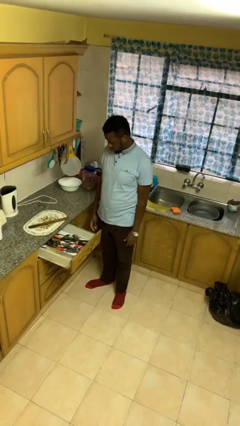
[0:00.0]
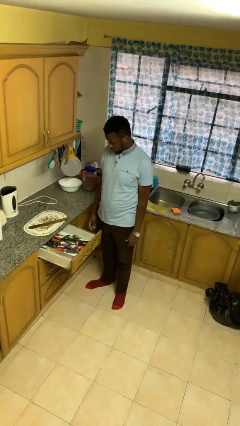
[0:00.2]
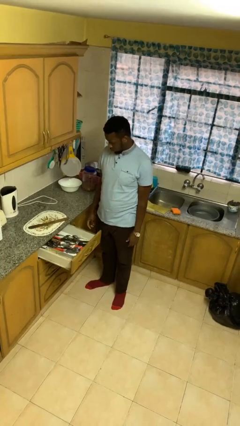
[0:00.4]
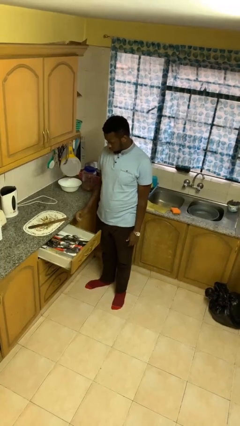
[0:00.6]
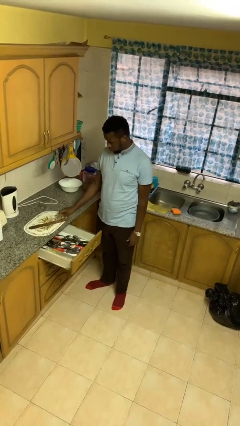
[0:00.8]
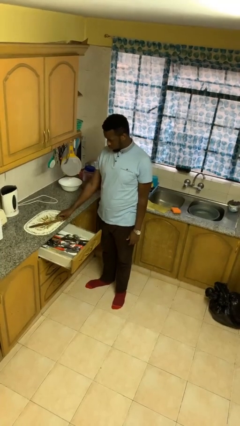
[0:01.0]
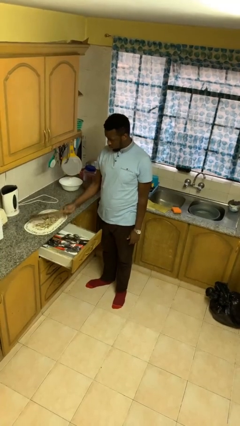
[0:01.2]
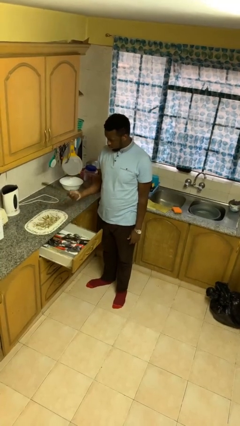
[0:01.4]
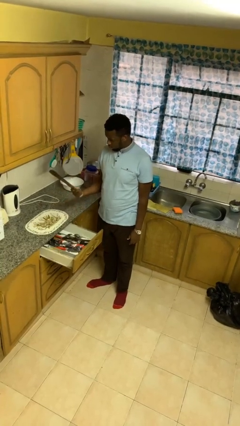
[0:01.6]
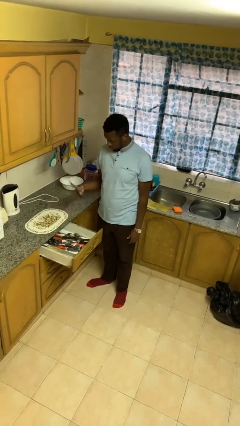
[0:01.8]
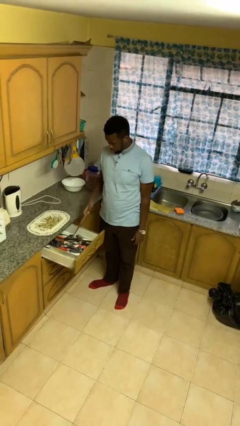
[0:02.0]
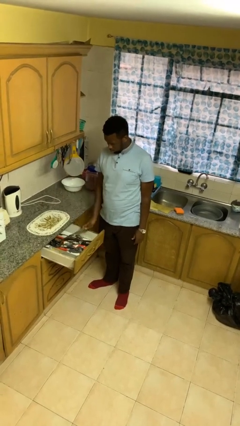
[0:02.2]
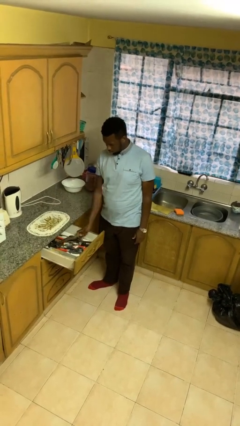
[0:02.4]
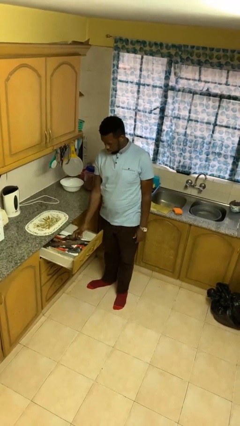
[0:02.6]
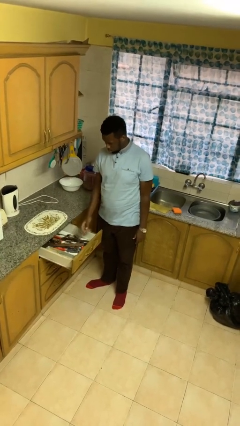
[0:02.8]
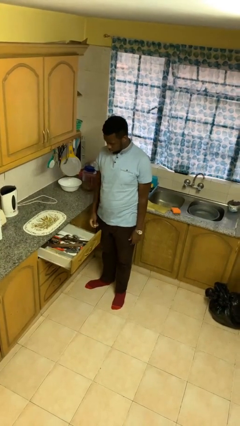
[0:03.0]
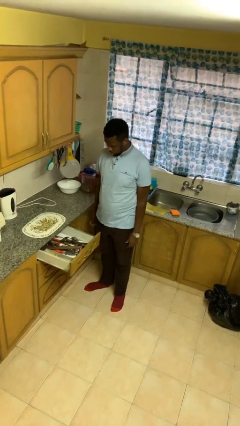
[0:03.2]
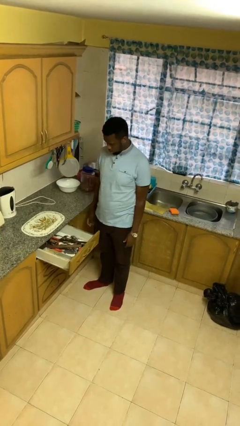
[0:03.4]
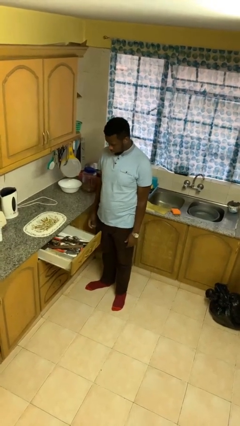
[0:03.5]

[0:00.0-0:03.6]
person puts object into kitchen drawer

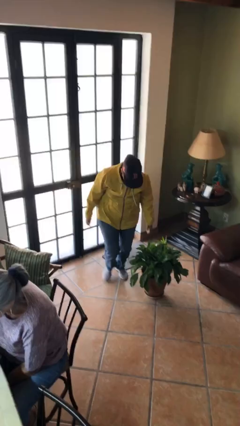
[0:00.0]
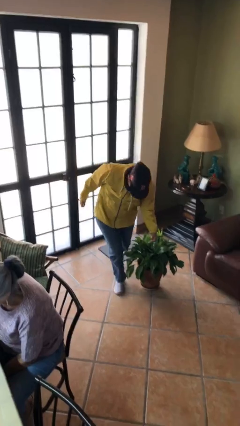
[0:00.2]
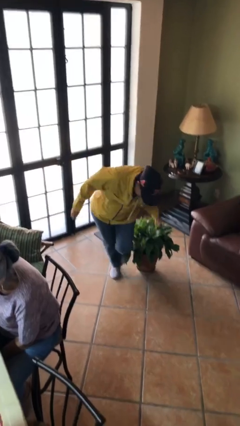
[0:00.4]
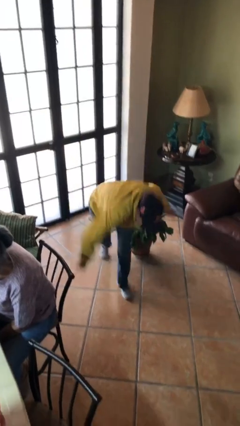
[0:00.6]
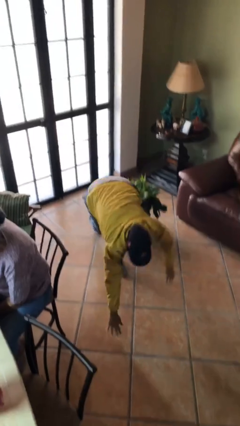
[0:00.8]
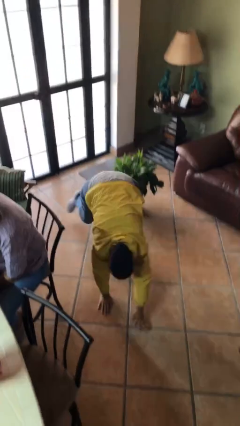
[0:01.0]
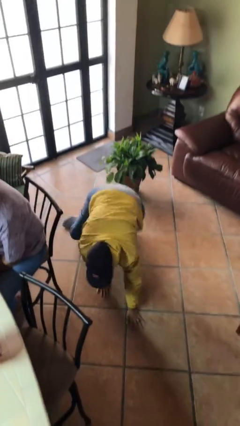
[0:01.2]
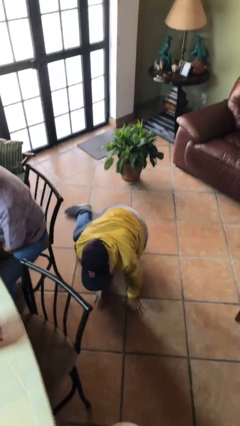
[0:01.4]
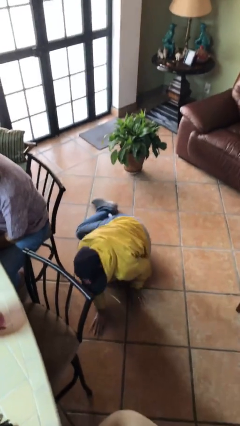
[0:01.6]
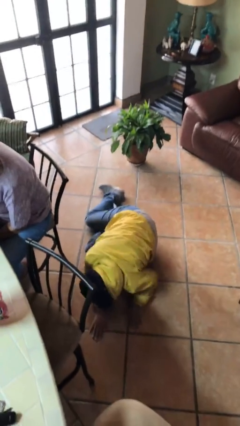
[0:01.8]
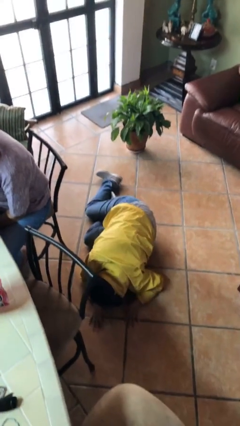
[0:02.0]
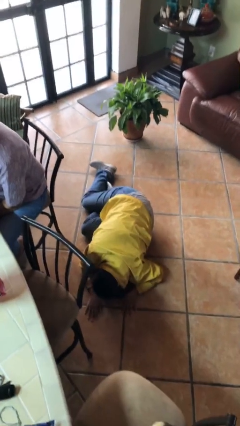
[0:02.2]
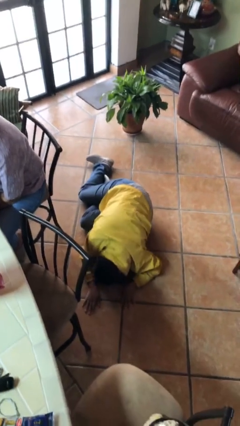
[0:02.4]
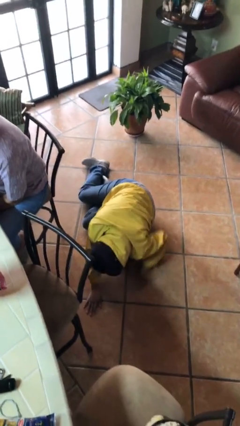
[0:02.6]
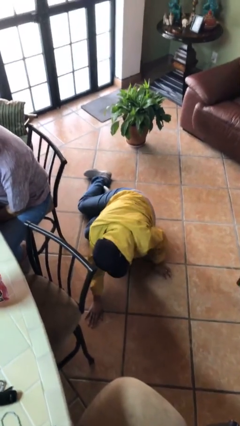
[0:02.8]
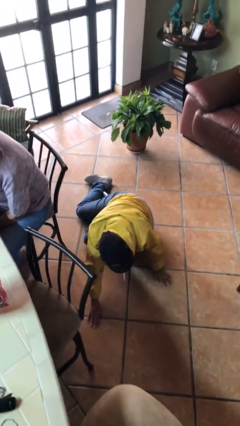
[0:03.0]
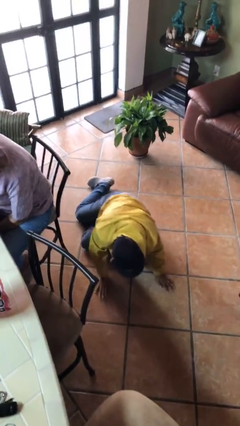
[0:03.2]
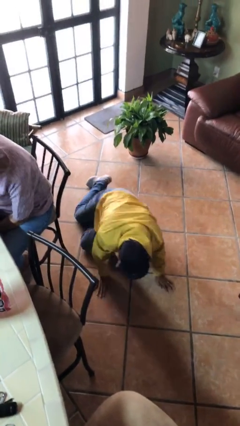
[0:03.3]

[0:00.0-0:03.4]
person trips on object on floor

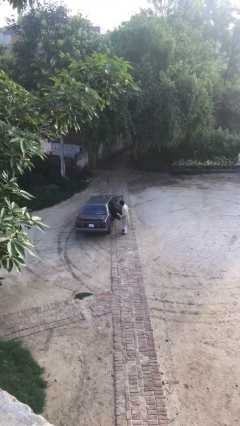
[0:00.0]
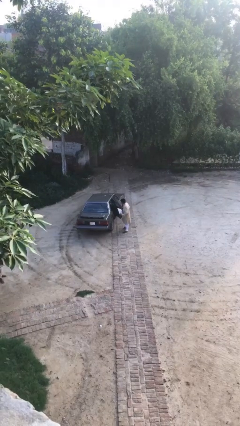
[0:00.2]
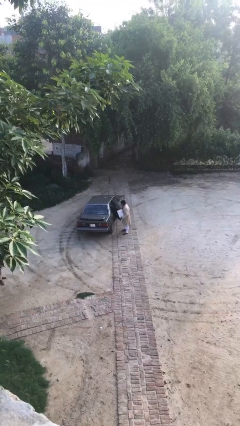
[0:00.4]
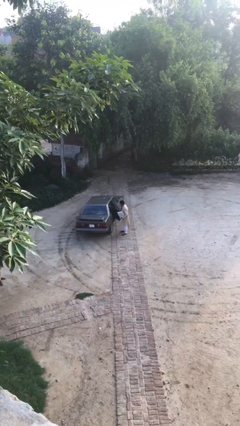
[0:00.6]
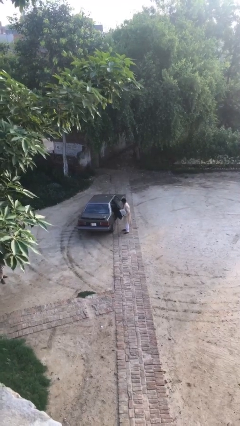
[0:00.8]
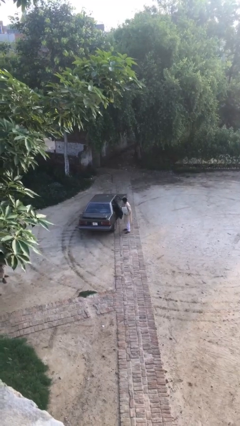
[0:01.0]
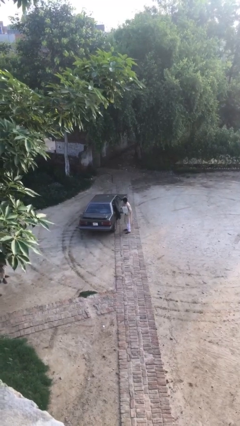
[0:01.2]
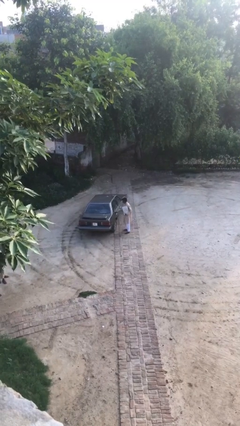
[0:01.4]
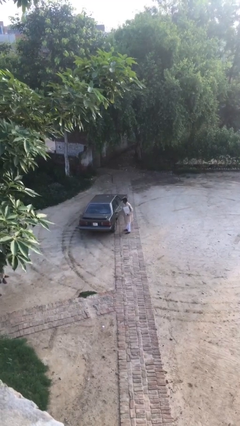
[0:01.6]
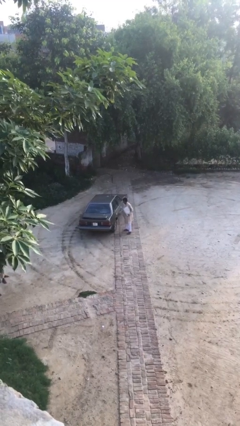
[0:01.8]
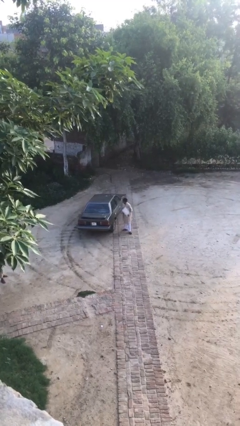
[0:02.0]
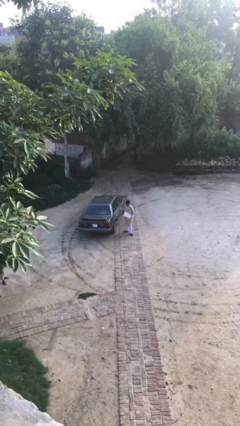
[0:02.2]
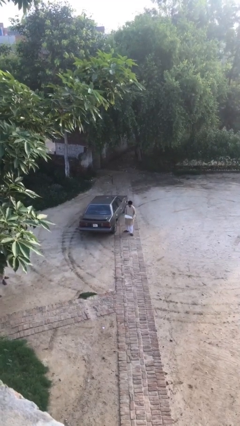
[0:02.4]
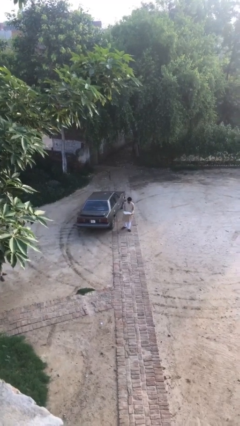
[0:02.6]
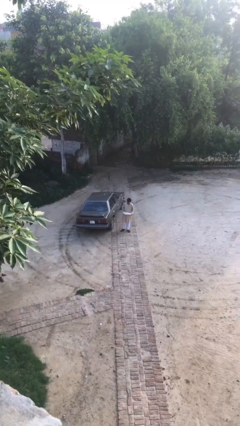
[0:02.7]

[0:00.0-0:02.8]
person closes car door

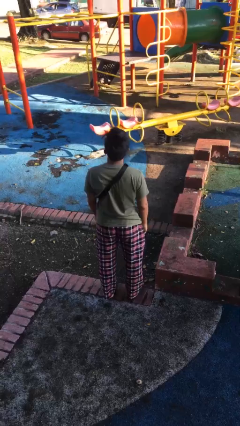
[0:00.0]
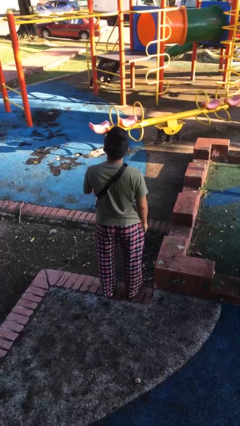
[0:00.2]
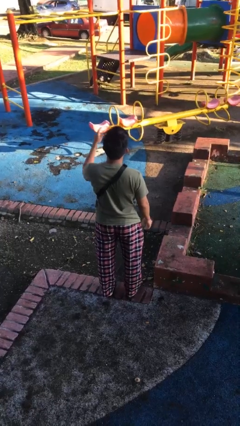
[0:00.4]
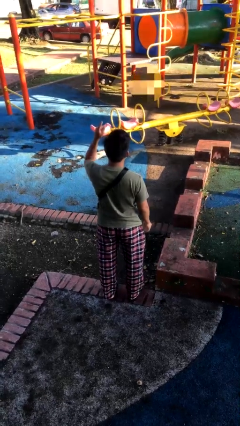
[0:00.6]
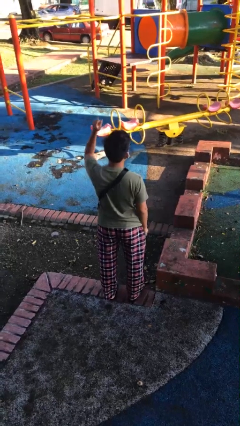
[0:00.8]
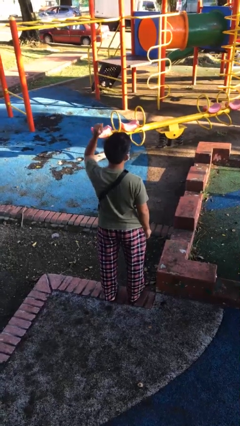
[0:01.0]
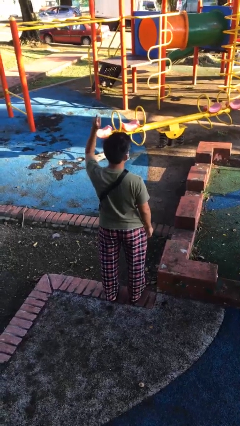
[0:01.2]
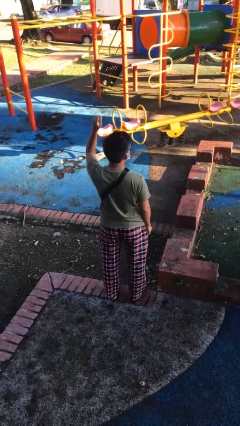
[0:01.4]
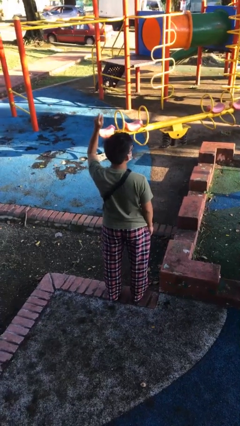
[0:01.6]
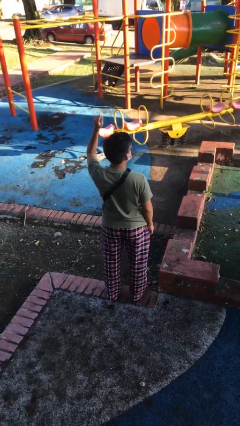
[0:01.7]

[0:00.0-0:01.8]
person gestures number one

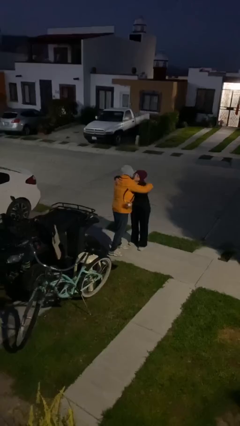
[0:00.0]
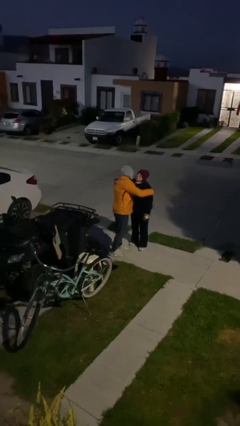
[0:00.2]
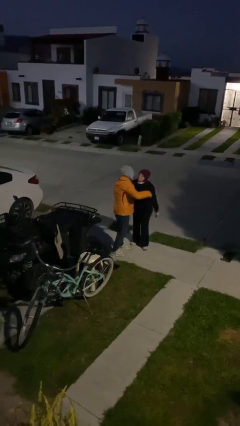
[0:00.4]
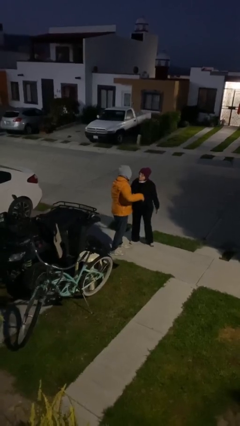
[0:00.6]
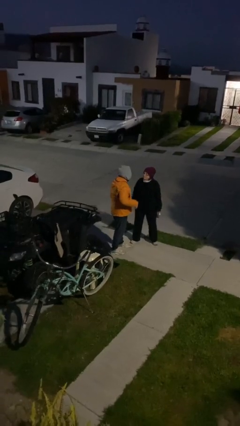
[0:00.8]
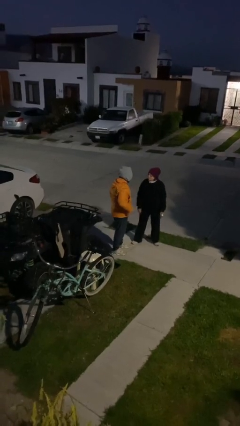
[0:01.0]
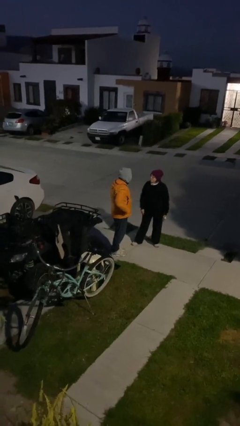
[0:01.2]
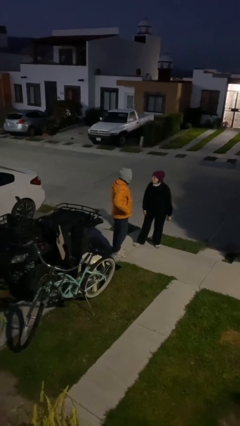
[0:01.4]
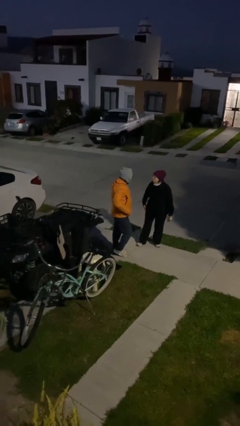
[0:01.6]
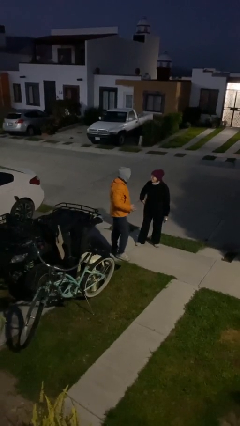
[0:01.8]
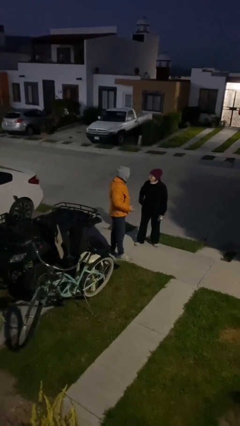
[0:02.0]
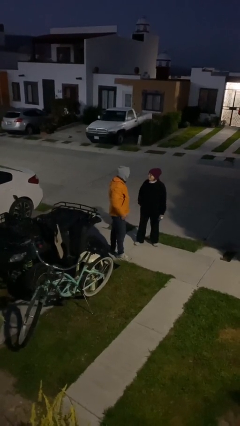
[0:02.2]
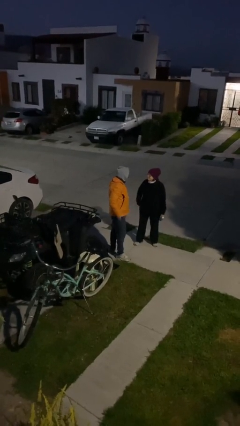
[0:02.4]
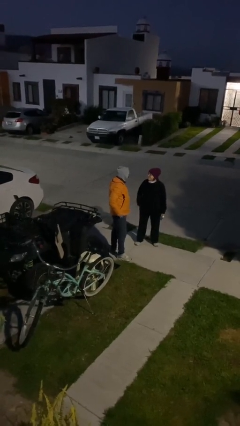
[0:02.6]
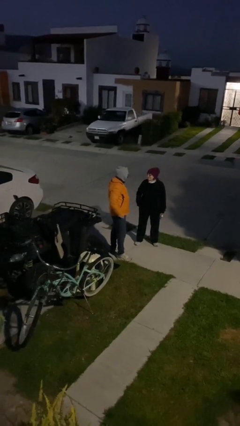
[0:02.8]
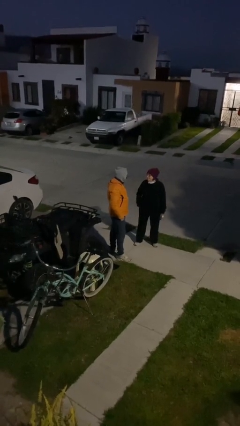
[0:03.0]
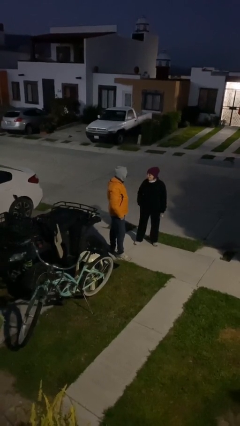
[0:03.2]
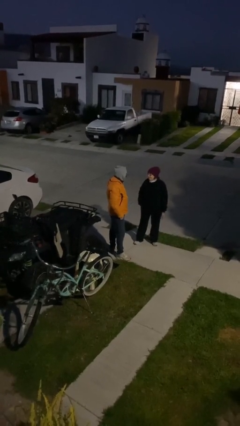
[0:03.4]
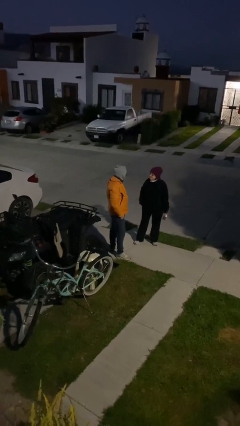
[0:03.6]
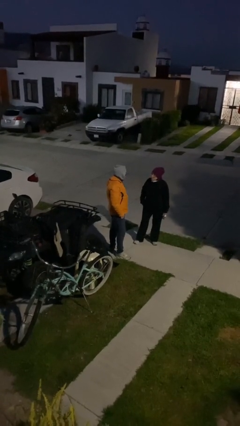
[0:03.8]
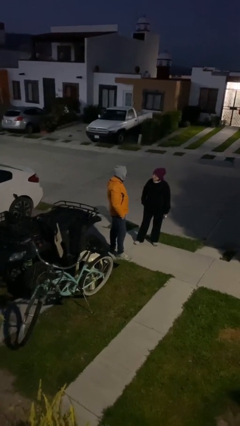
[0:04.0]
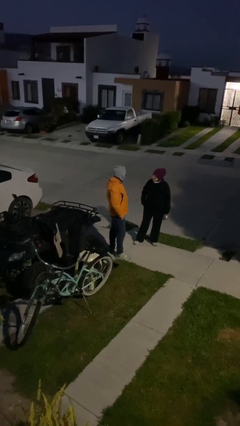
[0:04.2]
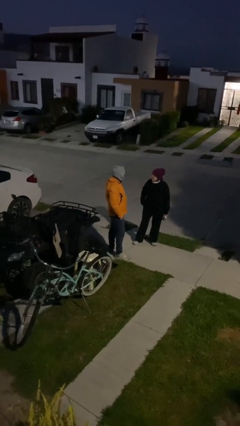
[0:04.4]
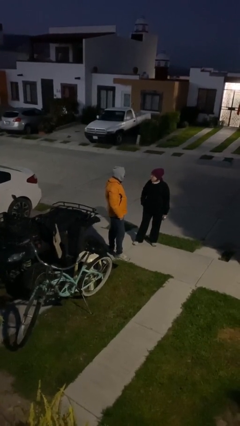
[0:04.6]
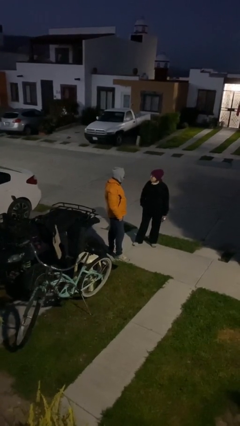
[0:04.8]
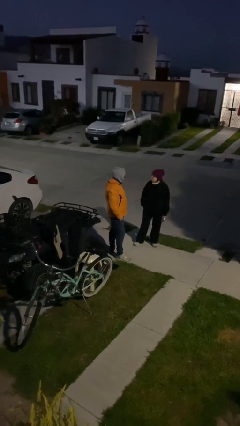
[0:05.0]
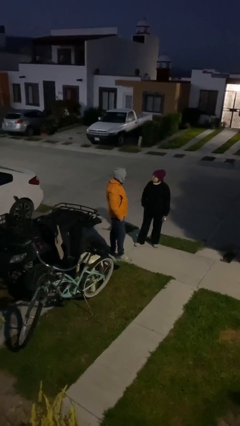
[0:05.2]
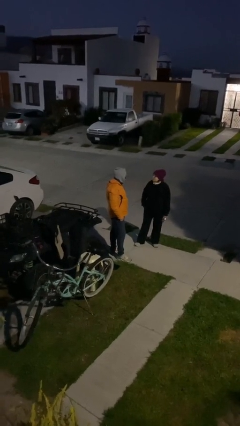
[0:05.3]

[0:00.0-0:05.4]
person talks to person

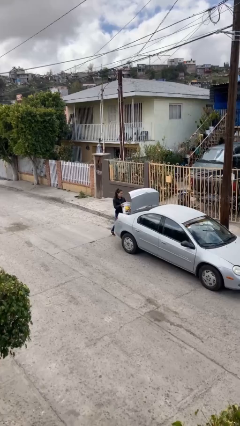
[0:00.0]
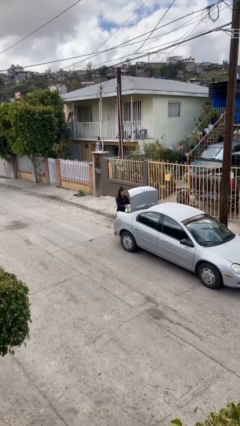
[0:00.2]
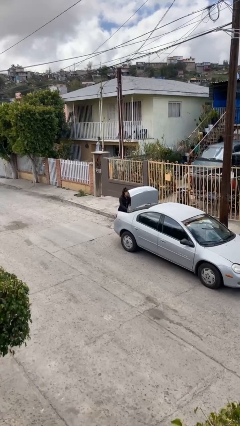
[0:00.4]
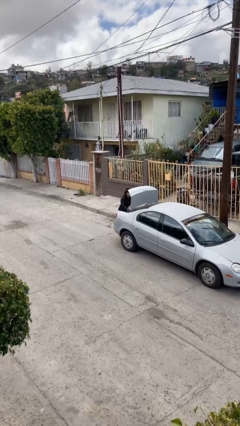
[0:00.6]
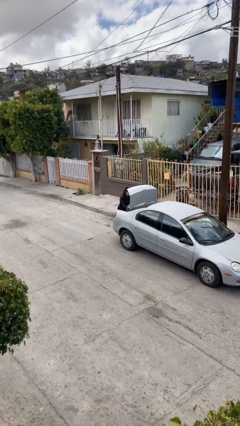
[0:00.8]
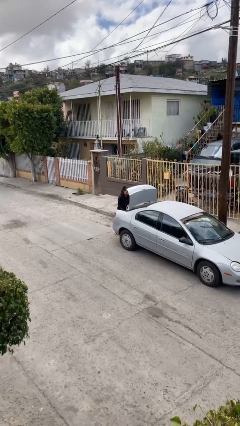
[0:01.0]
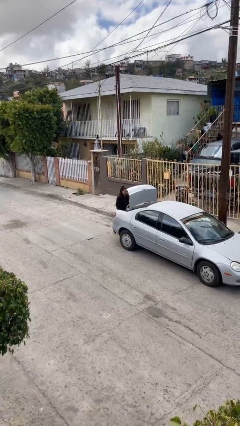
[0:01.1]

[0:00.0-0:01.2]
person loads car
